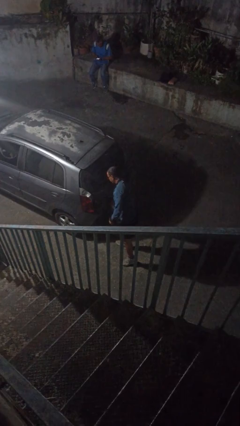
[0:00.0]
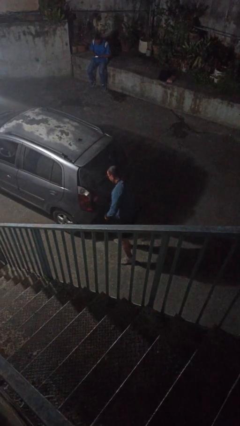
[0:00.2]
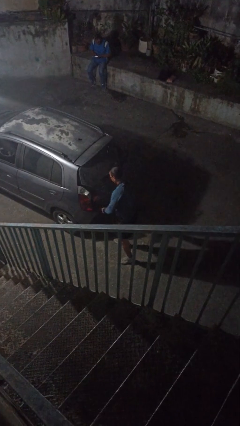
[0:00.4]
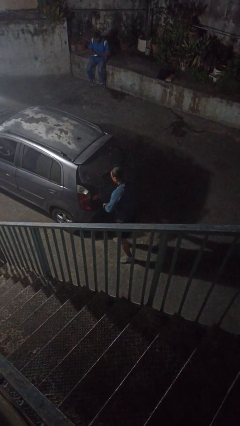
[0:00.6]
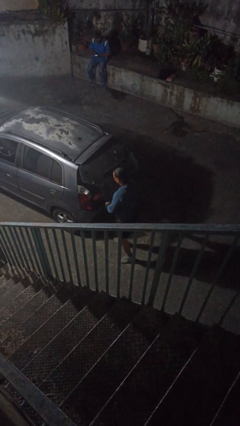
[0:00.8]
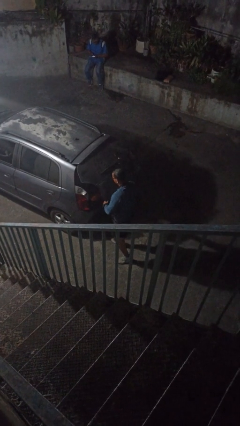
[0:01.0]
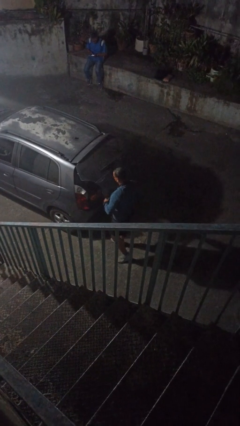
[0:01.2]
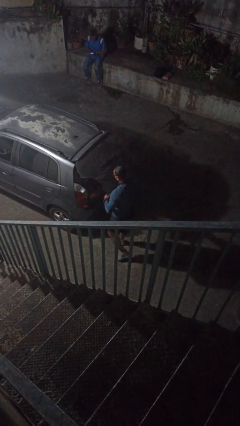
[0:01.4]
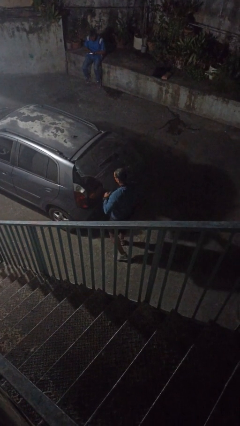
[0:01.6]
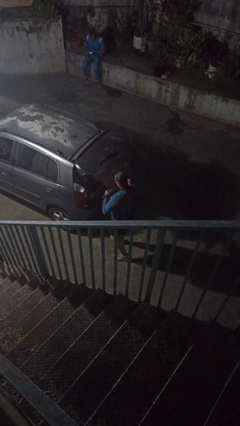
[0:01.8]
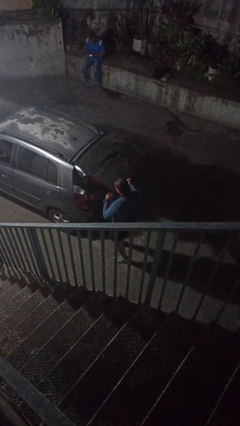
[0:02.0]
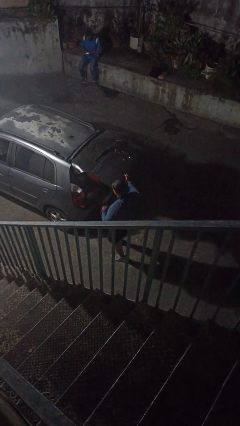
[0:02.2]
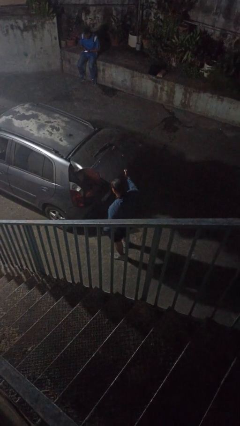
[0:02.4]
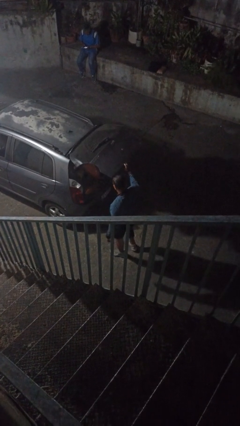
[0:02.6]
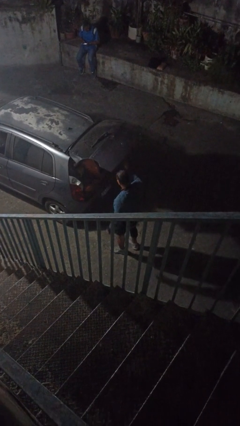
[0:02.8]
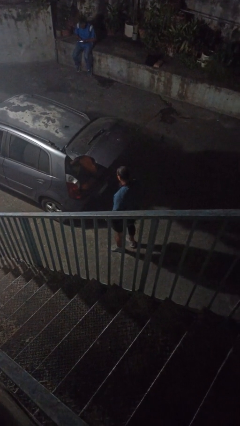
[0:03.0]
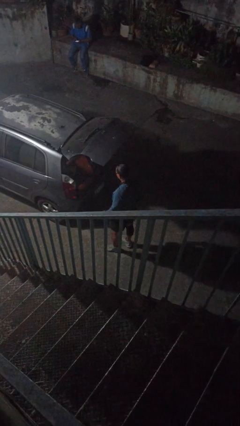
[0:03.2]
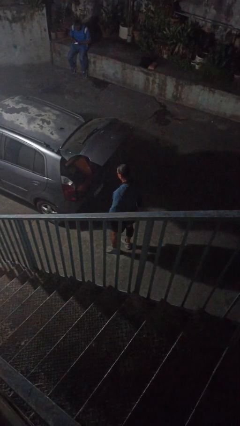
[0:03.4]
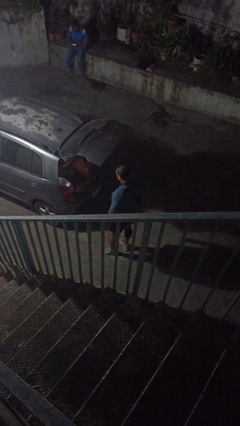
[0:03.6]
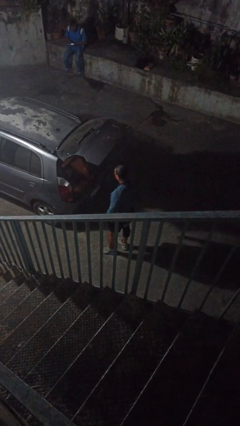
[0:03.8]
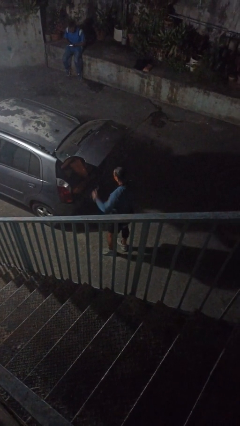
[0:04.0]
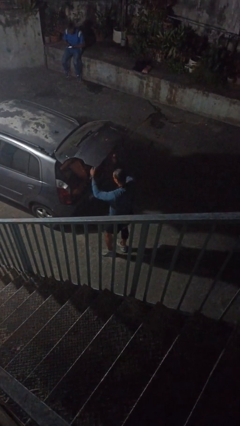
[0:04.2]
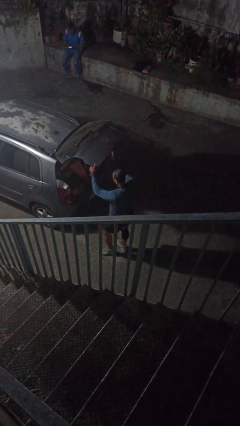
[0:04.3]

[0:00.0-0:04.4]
person opens car trunk

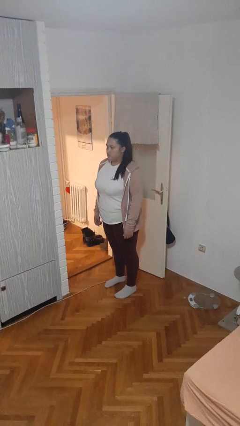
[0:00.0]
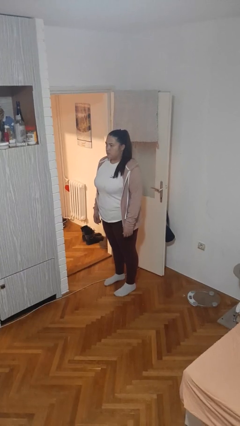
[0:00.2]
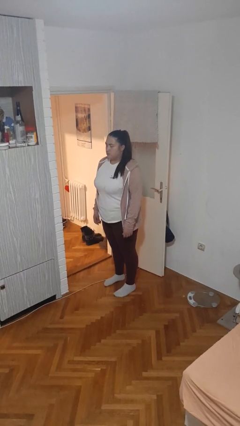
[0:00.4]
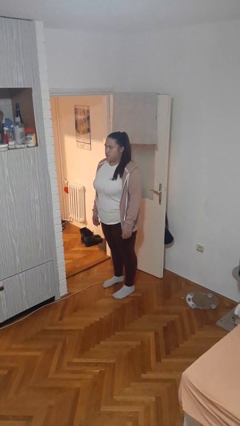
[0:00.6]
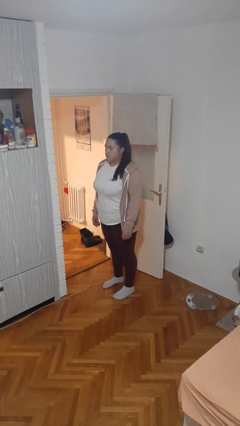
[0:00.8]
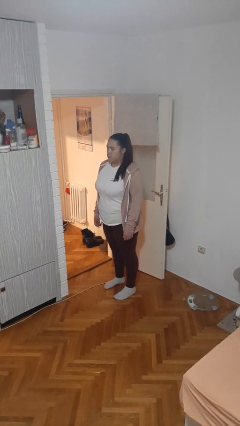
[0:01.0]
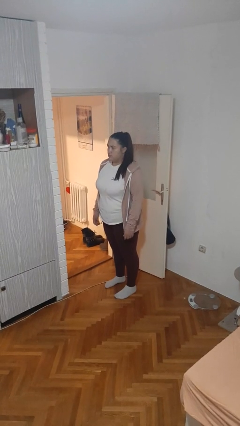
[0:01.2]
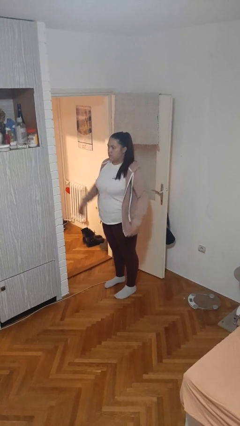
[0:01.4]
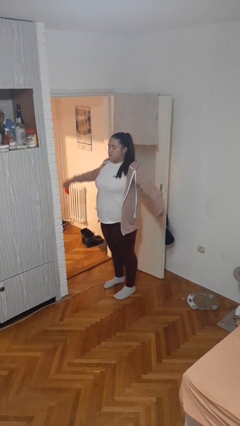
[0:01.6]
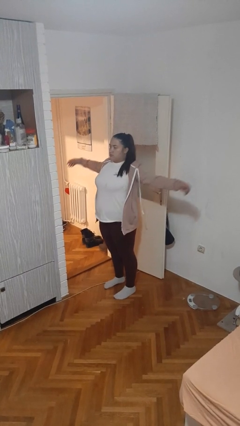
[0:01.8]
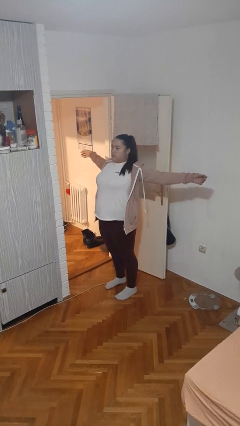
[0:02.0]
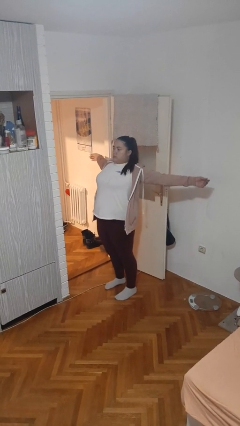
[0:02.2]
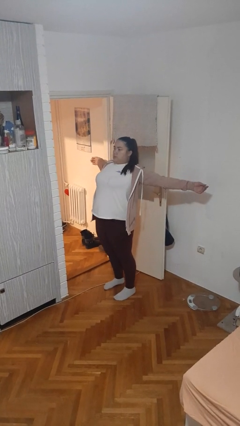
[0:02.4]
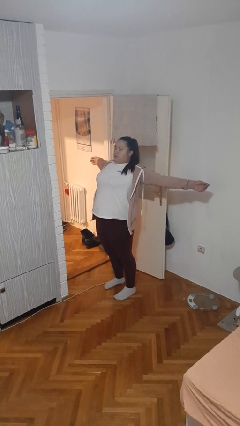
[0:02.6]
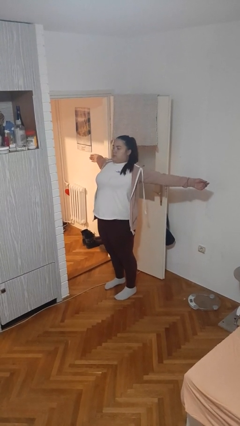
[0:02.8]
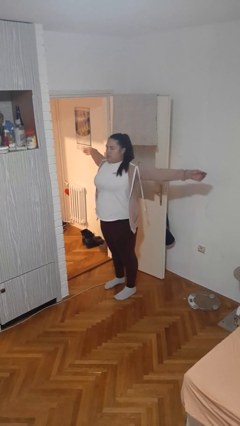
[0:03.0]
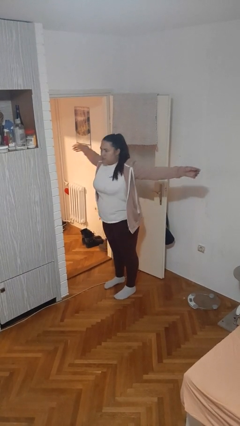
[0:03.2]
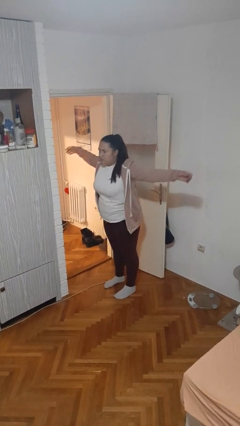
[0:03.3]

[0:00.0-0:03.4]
person stretches arms to side

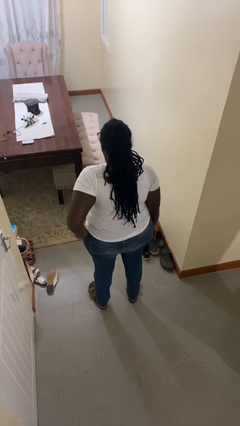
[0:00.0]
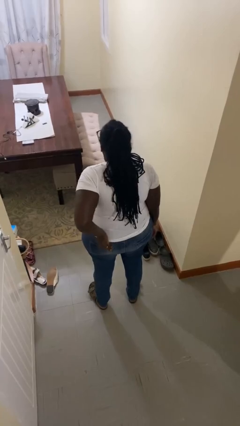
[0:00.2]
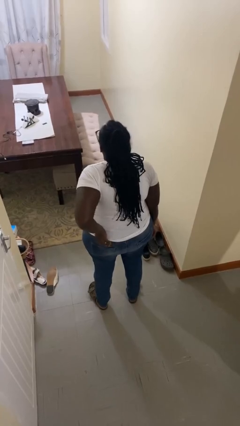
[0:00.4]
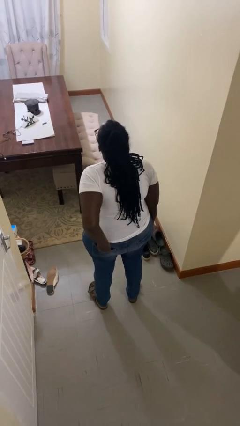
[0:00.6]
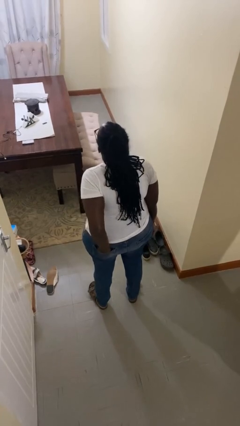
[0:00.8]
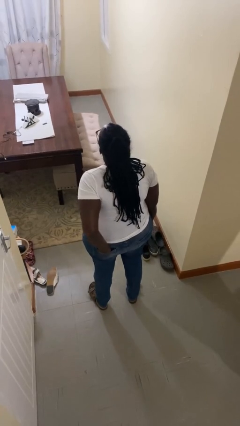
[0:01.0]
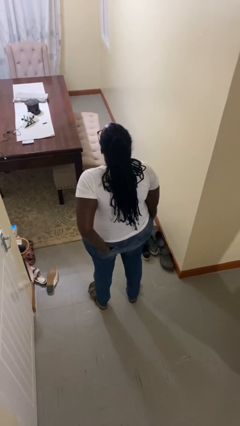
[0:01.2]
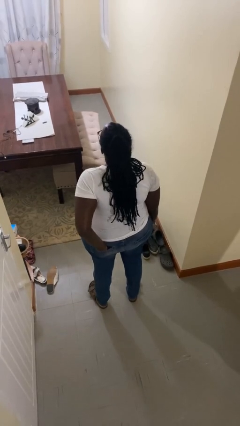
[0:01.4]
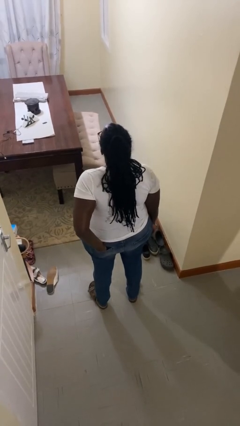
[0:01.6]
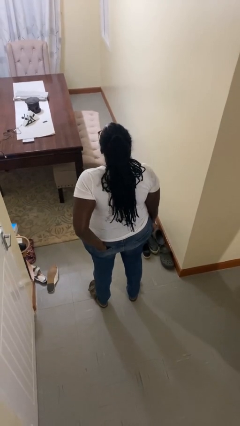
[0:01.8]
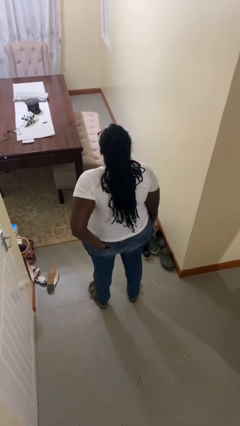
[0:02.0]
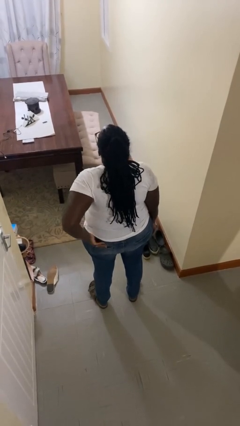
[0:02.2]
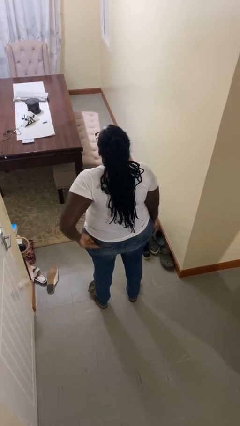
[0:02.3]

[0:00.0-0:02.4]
person puts hands in back pockets

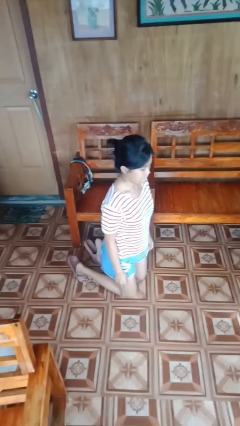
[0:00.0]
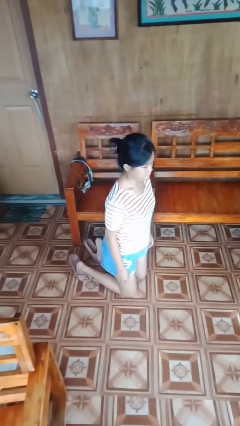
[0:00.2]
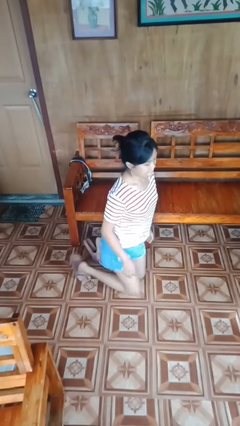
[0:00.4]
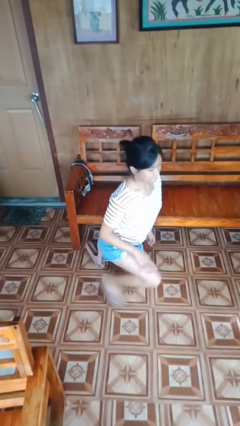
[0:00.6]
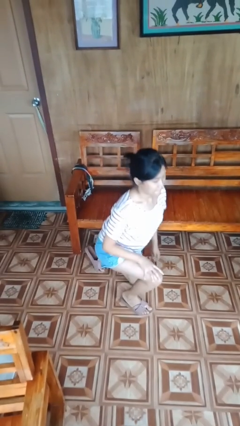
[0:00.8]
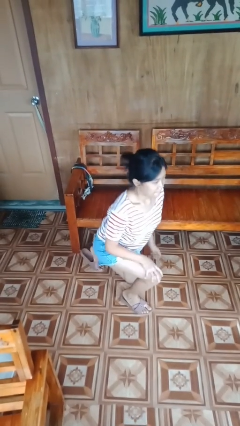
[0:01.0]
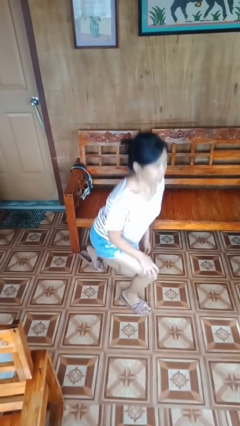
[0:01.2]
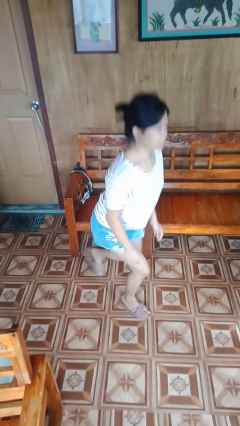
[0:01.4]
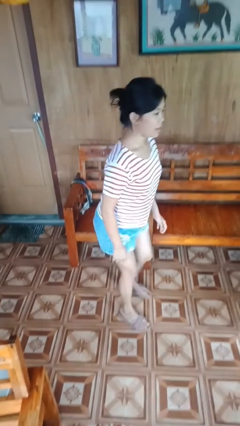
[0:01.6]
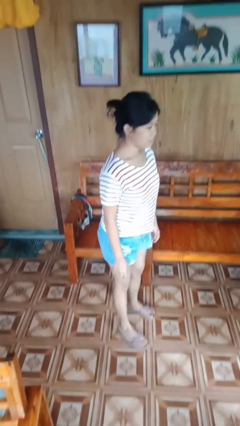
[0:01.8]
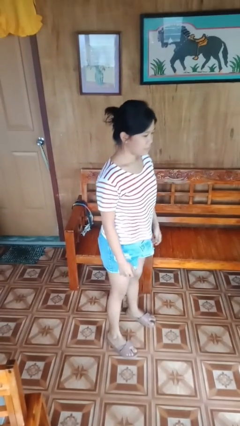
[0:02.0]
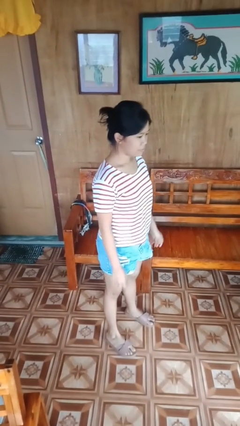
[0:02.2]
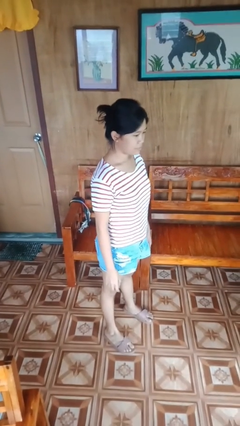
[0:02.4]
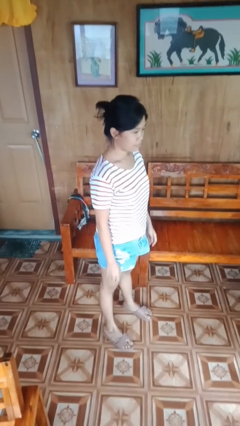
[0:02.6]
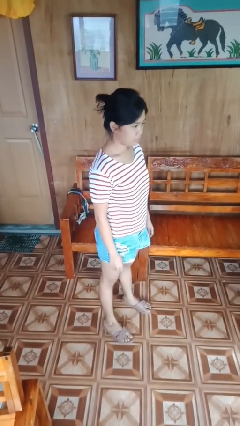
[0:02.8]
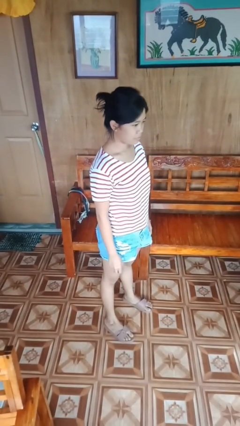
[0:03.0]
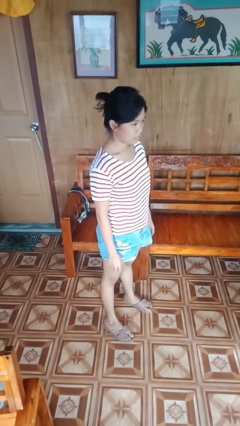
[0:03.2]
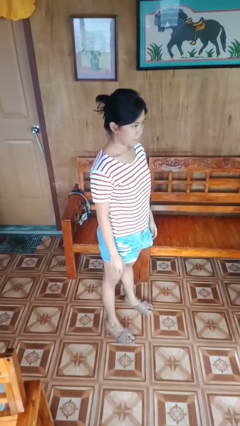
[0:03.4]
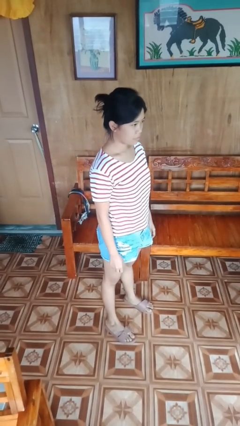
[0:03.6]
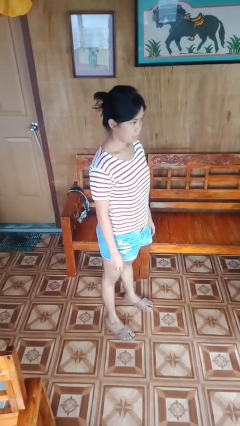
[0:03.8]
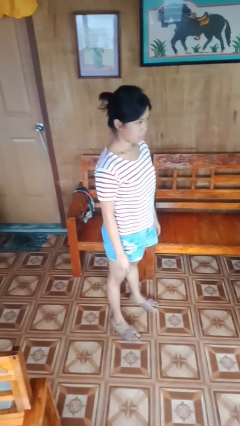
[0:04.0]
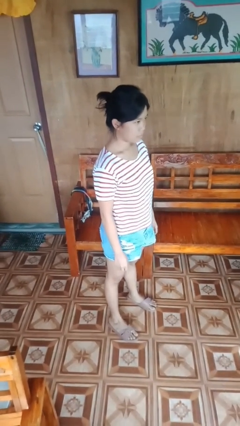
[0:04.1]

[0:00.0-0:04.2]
person stands up from floor

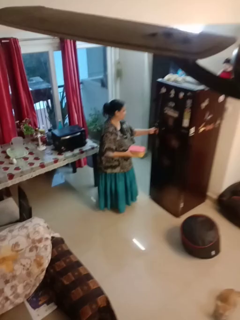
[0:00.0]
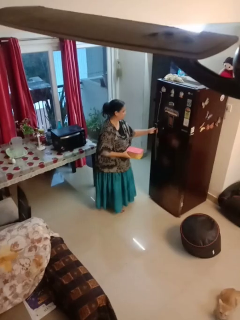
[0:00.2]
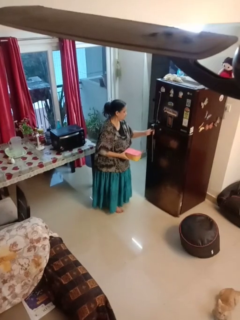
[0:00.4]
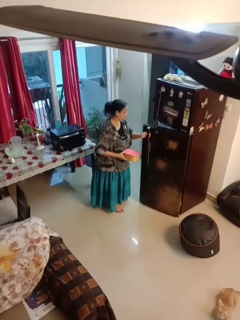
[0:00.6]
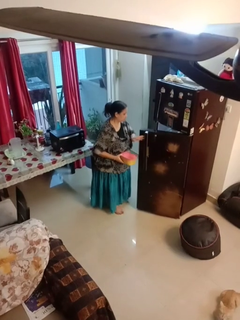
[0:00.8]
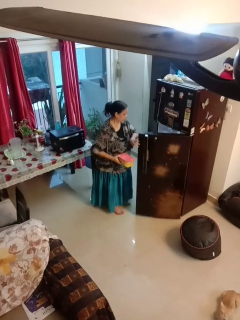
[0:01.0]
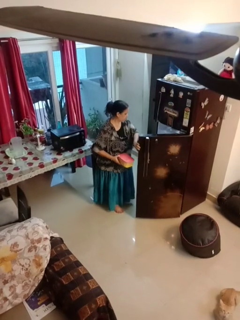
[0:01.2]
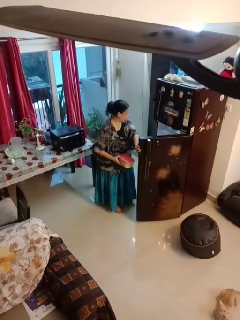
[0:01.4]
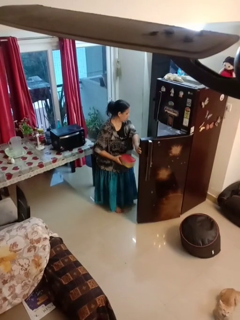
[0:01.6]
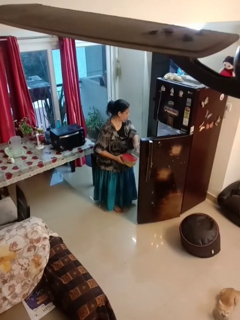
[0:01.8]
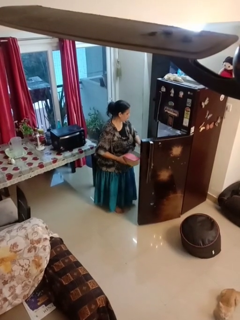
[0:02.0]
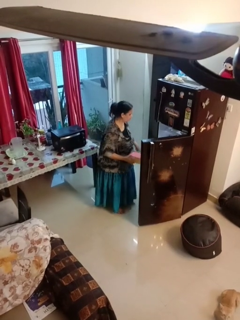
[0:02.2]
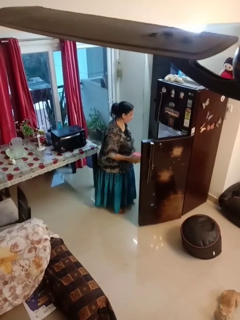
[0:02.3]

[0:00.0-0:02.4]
person opens refrigerator

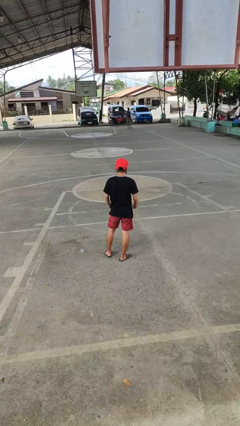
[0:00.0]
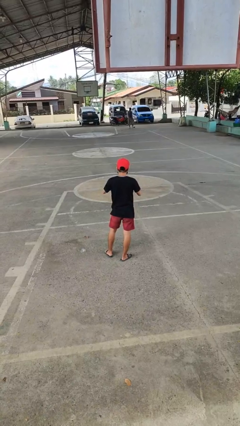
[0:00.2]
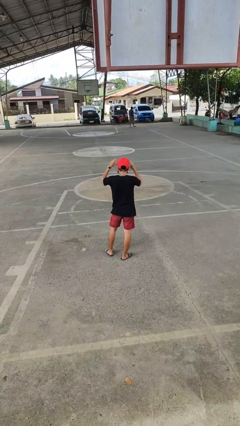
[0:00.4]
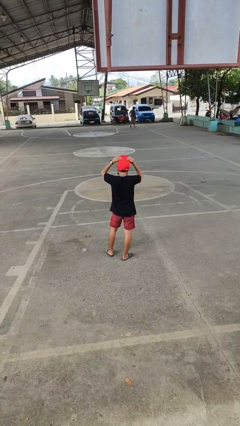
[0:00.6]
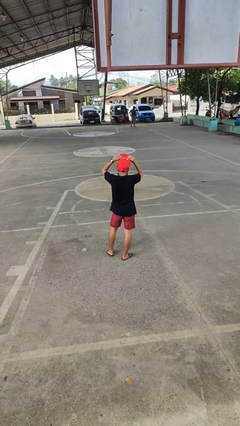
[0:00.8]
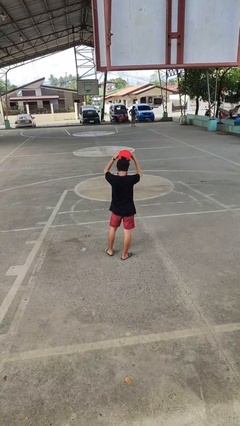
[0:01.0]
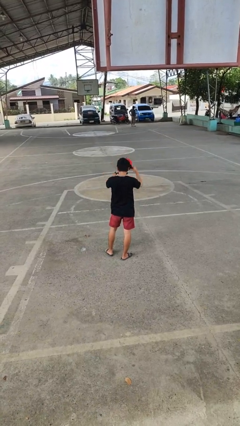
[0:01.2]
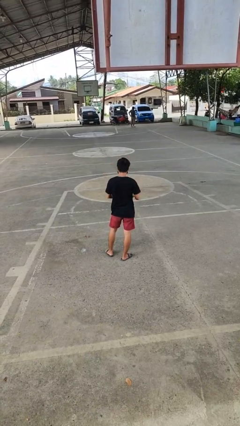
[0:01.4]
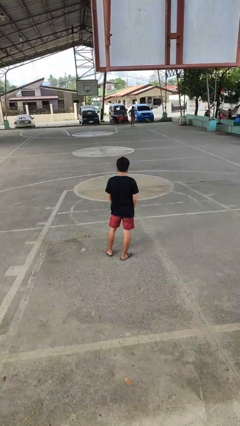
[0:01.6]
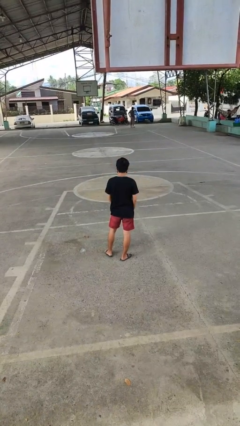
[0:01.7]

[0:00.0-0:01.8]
person takes off hat
